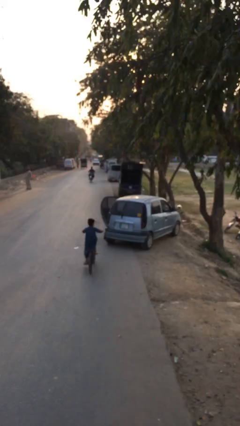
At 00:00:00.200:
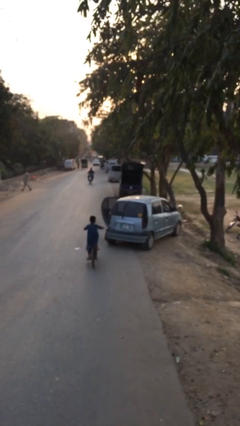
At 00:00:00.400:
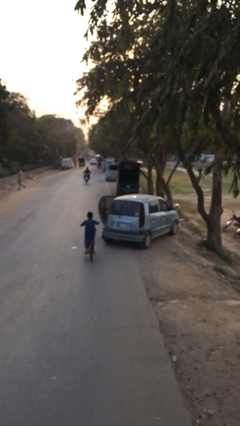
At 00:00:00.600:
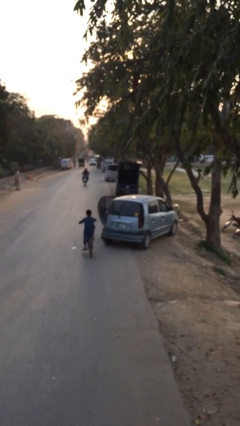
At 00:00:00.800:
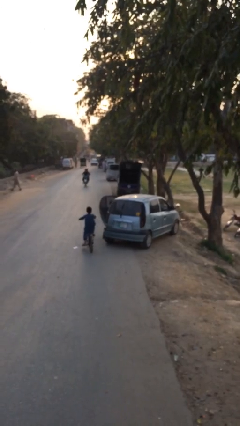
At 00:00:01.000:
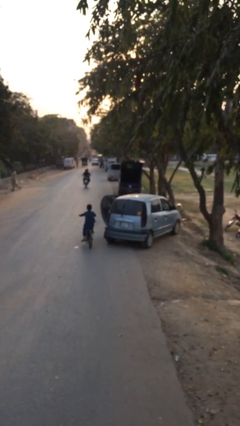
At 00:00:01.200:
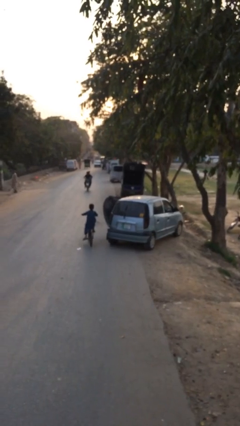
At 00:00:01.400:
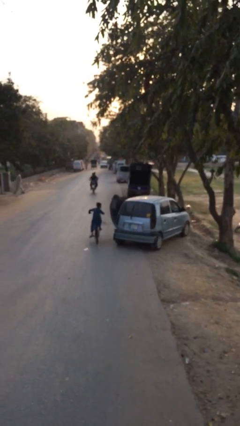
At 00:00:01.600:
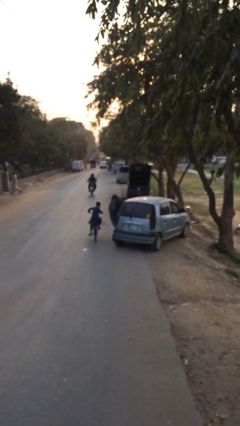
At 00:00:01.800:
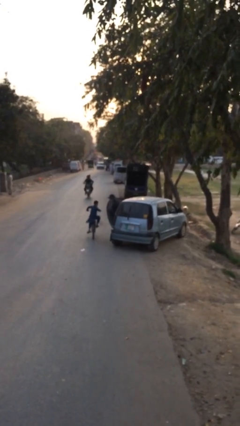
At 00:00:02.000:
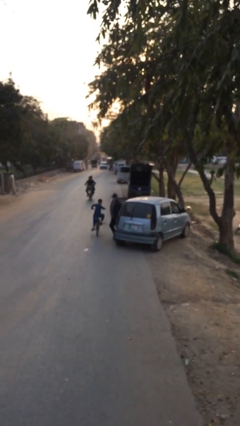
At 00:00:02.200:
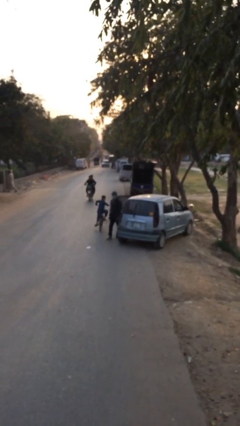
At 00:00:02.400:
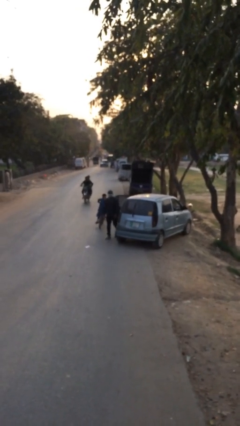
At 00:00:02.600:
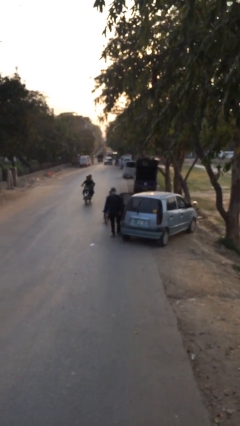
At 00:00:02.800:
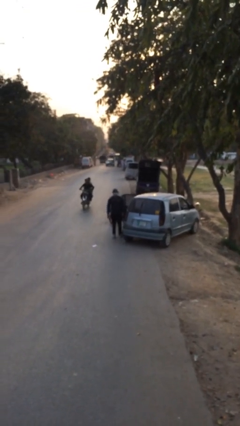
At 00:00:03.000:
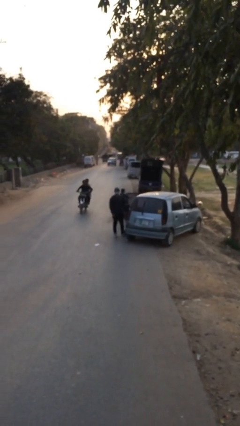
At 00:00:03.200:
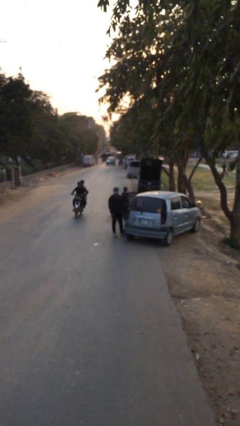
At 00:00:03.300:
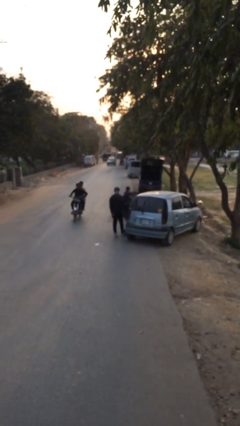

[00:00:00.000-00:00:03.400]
person exits car

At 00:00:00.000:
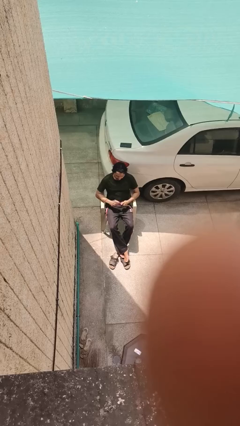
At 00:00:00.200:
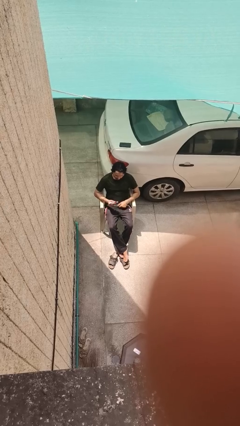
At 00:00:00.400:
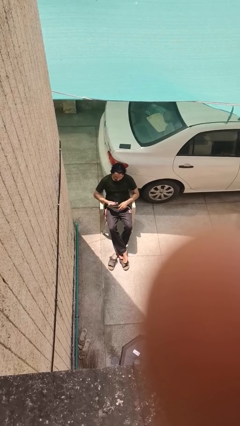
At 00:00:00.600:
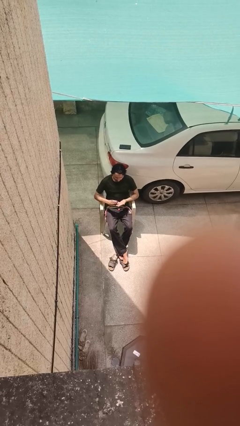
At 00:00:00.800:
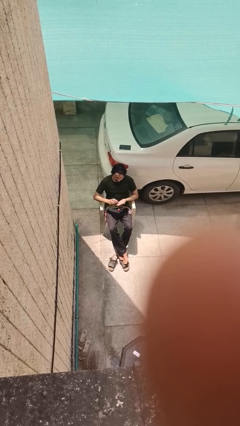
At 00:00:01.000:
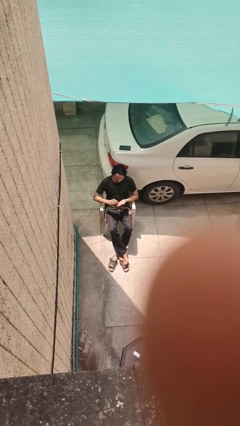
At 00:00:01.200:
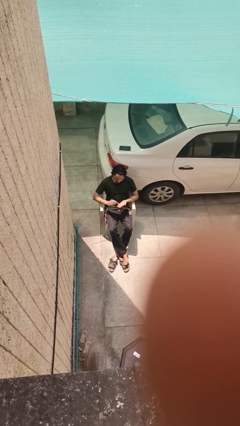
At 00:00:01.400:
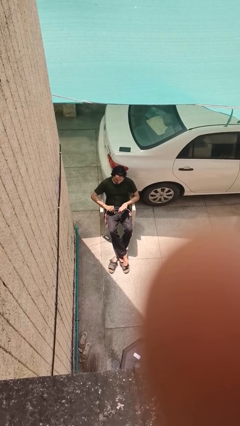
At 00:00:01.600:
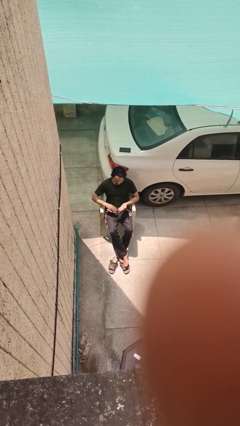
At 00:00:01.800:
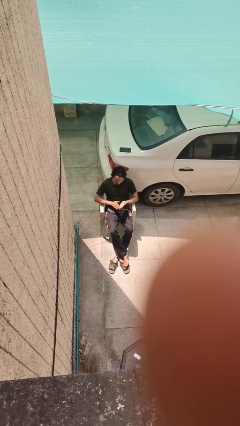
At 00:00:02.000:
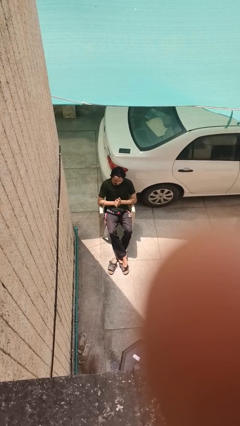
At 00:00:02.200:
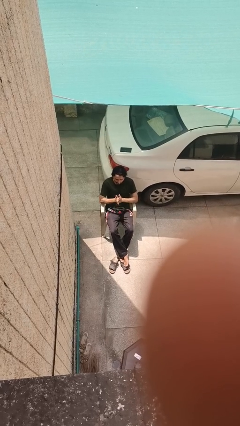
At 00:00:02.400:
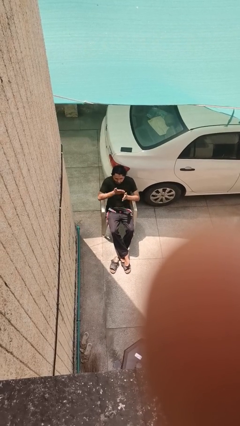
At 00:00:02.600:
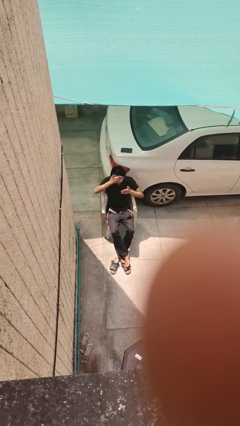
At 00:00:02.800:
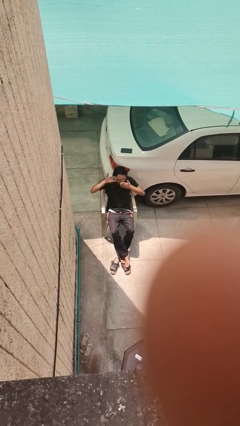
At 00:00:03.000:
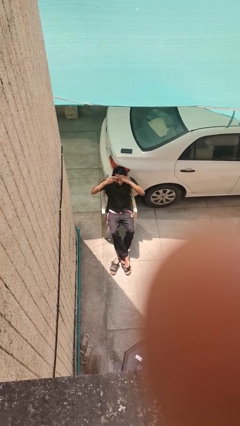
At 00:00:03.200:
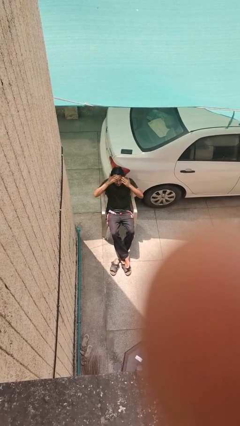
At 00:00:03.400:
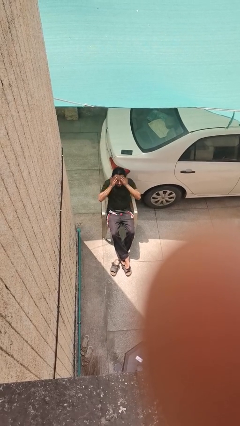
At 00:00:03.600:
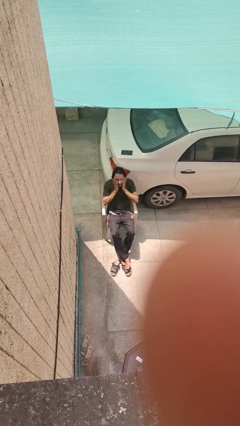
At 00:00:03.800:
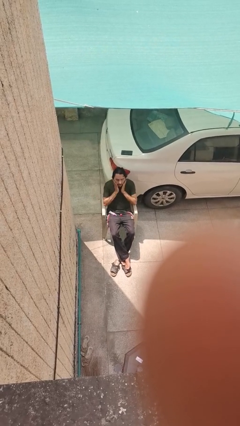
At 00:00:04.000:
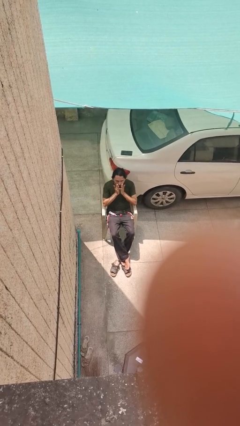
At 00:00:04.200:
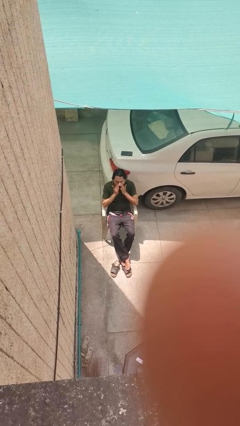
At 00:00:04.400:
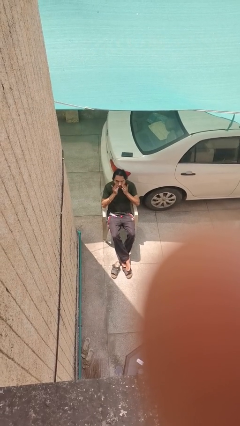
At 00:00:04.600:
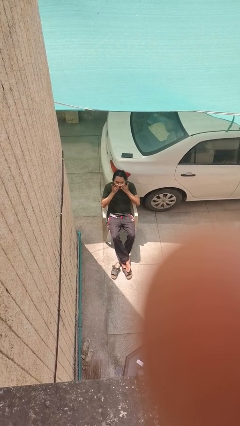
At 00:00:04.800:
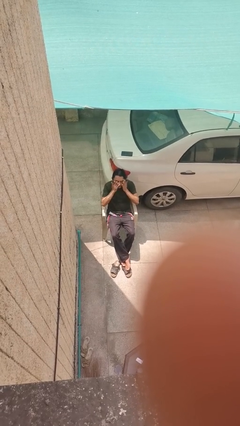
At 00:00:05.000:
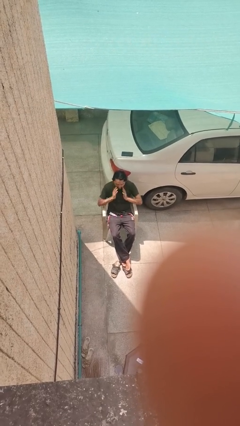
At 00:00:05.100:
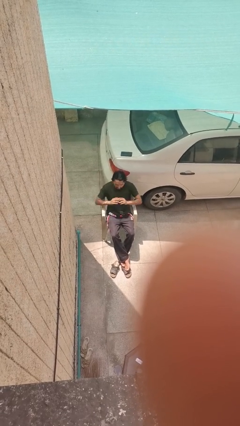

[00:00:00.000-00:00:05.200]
person applies facial moisturizer

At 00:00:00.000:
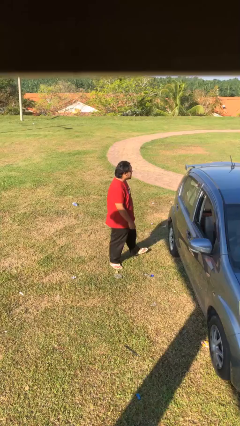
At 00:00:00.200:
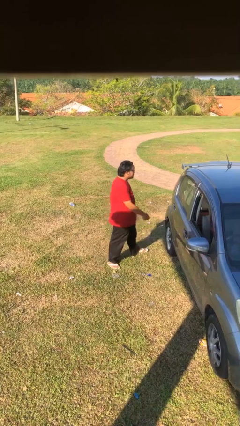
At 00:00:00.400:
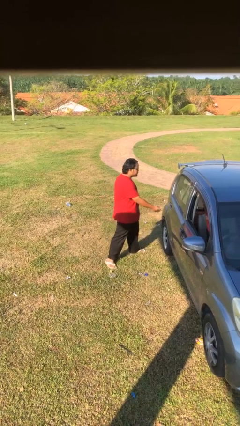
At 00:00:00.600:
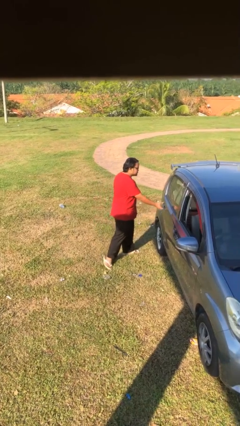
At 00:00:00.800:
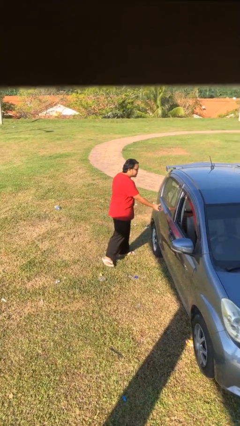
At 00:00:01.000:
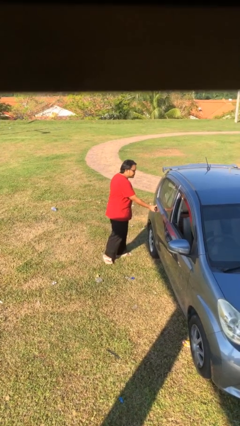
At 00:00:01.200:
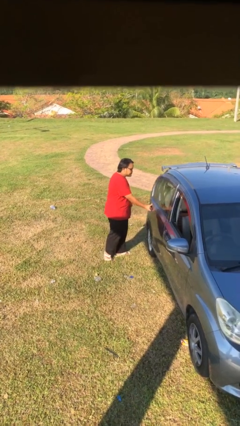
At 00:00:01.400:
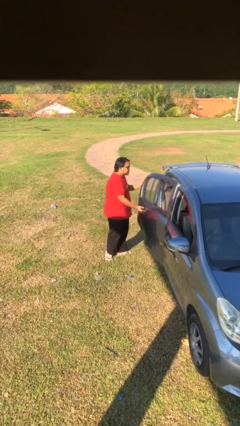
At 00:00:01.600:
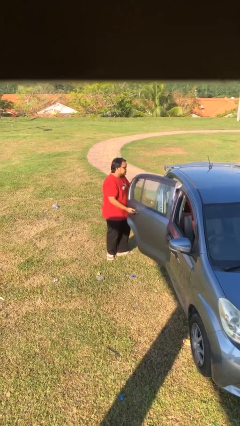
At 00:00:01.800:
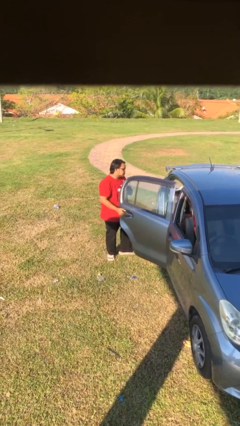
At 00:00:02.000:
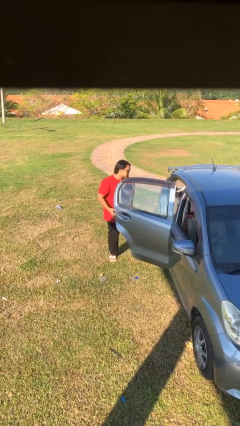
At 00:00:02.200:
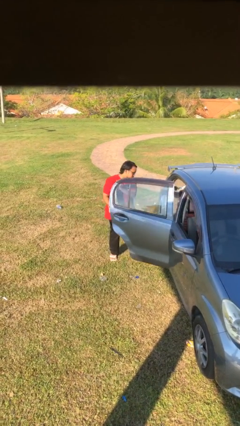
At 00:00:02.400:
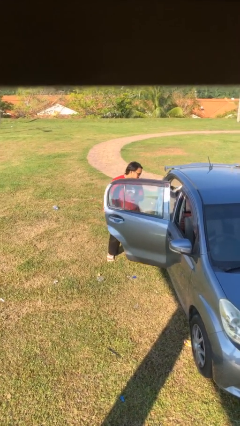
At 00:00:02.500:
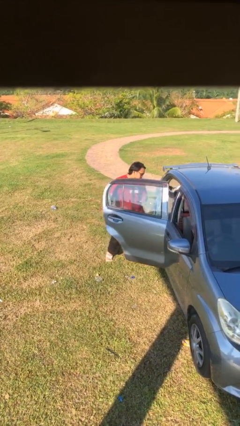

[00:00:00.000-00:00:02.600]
person opens car door

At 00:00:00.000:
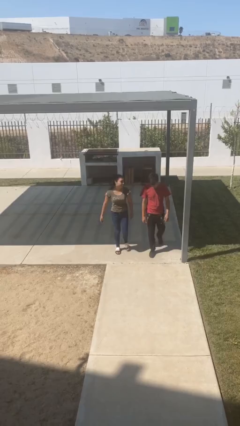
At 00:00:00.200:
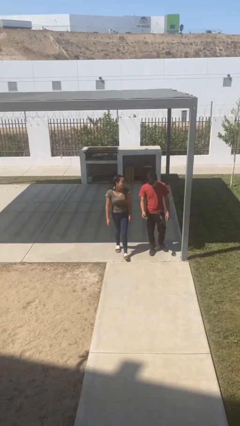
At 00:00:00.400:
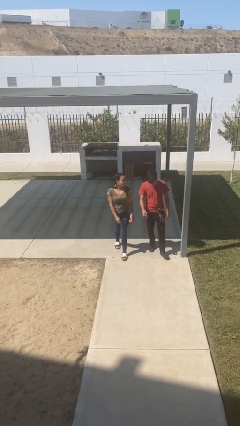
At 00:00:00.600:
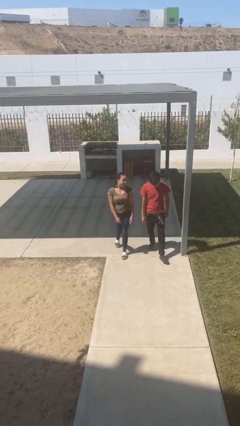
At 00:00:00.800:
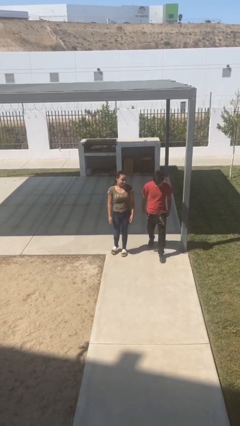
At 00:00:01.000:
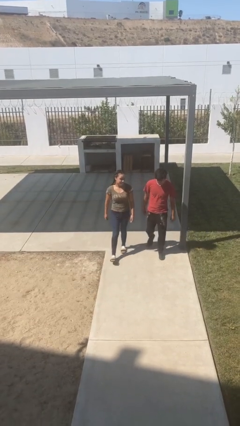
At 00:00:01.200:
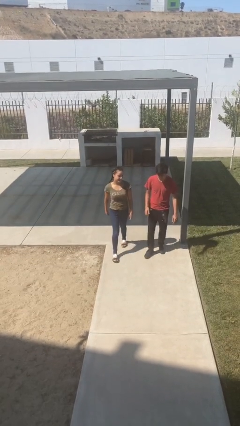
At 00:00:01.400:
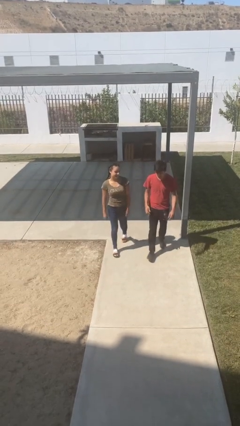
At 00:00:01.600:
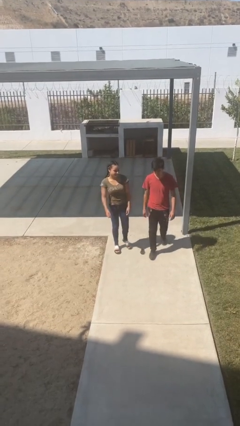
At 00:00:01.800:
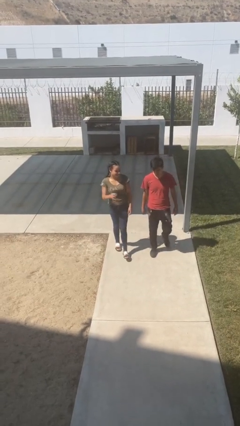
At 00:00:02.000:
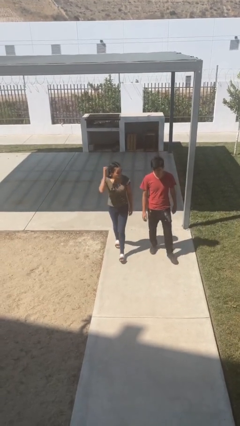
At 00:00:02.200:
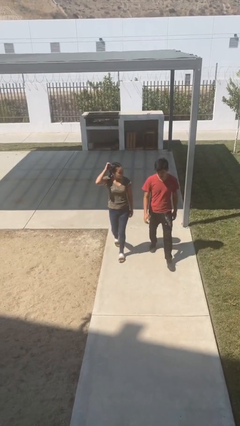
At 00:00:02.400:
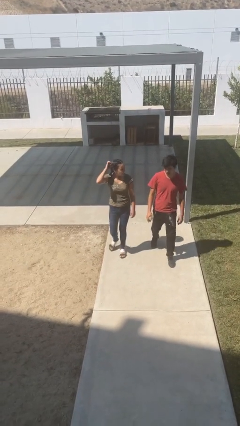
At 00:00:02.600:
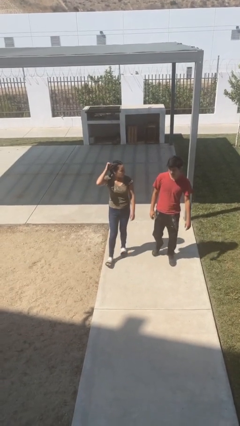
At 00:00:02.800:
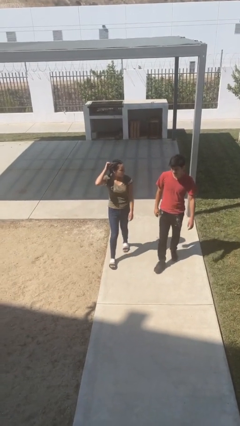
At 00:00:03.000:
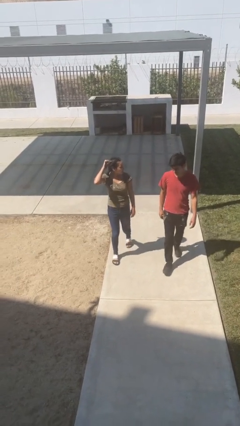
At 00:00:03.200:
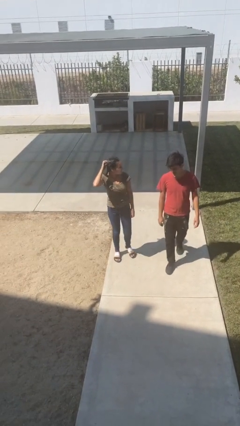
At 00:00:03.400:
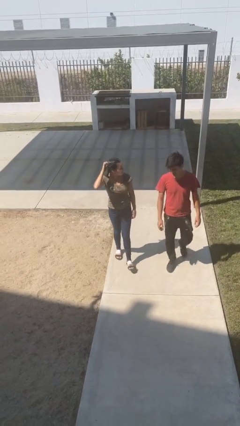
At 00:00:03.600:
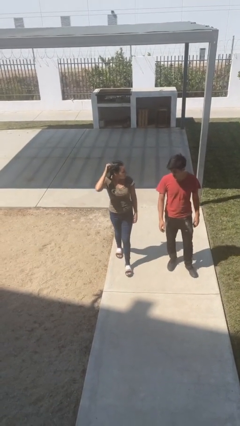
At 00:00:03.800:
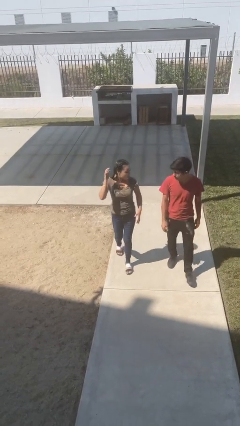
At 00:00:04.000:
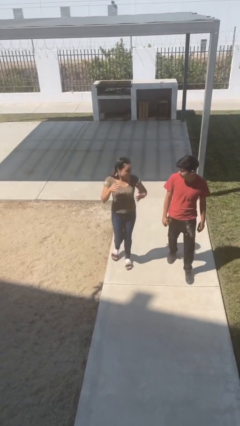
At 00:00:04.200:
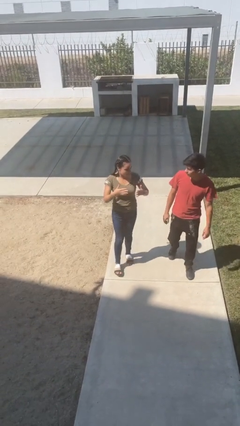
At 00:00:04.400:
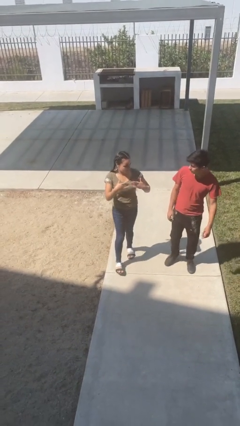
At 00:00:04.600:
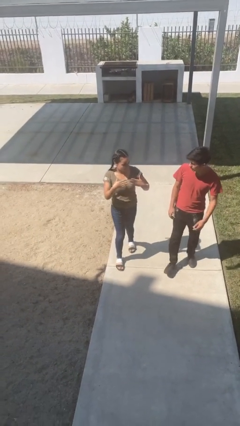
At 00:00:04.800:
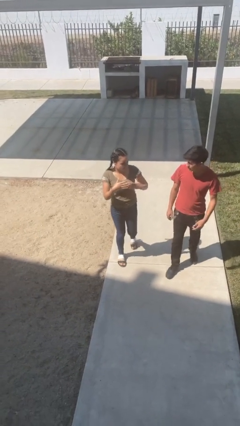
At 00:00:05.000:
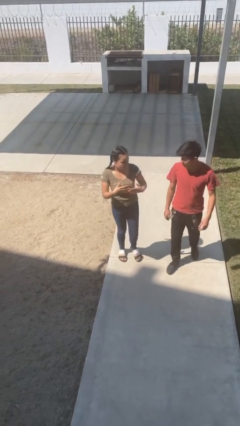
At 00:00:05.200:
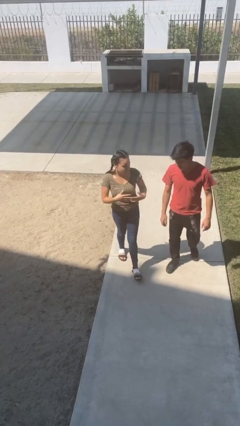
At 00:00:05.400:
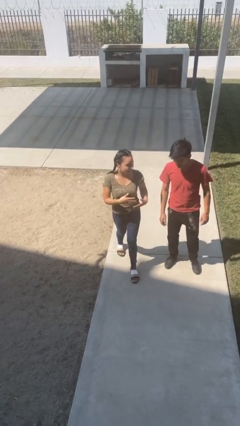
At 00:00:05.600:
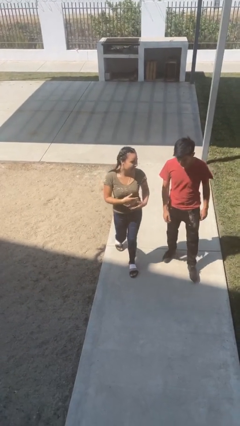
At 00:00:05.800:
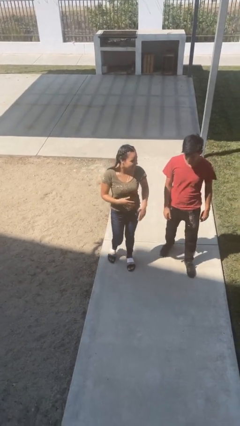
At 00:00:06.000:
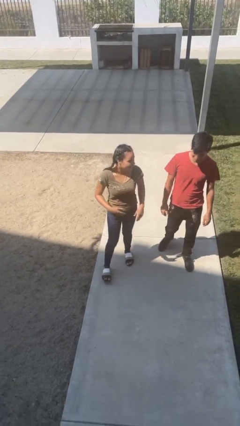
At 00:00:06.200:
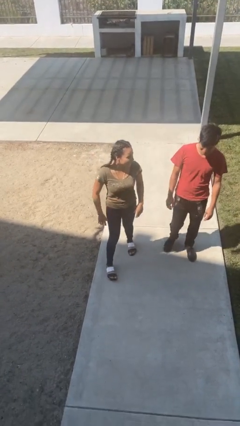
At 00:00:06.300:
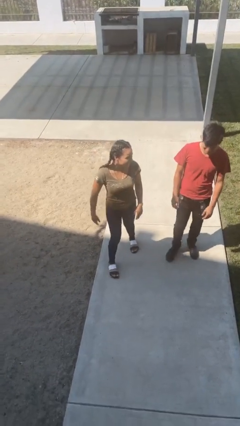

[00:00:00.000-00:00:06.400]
person talks to person
